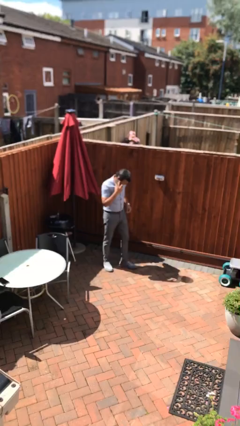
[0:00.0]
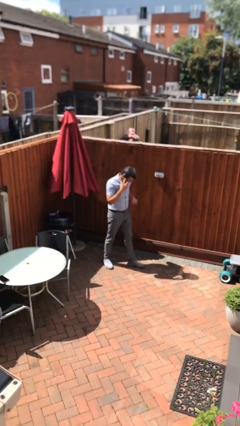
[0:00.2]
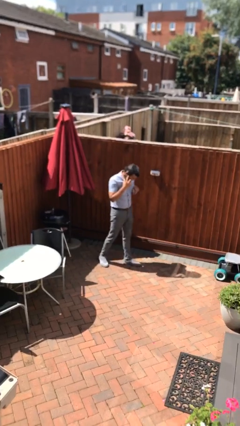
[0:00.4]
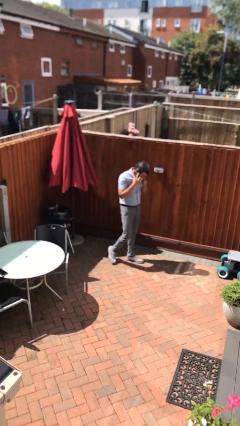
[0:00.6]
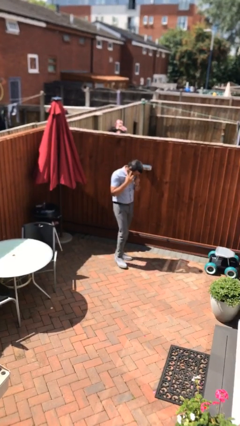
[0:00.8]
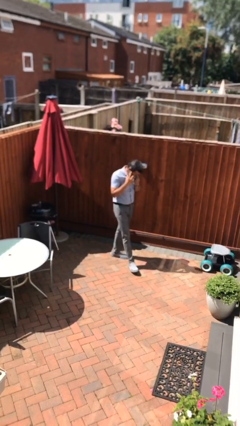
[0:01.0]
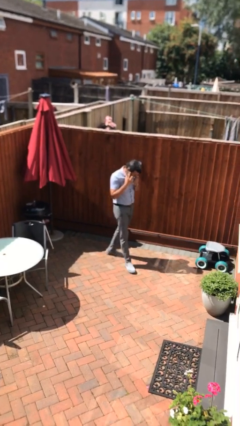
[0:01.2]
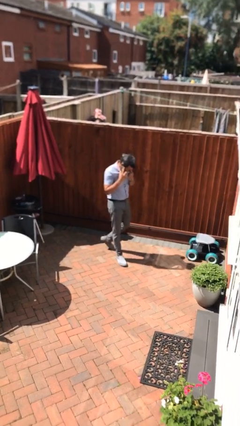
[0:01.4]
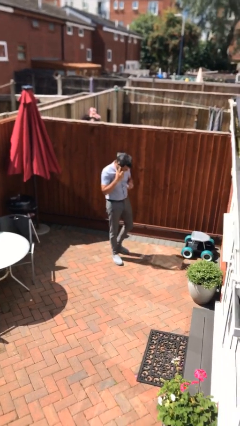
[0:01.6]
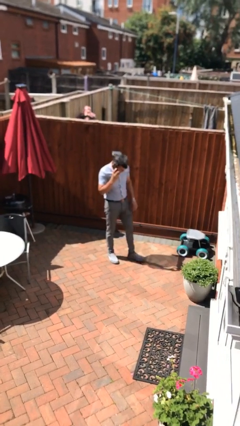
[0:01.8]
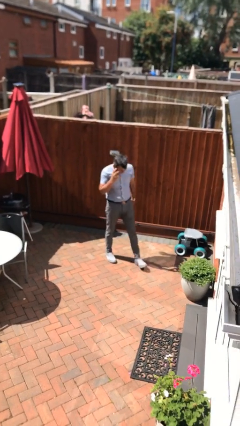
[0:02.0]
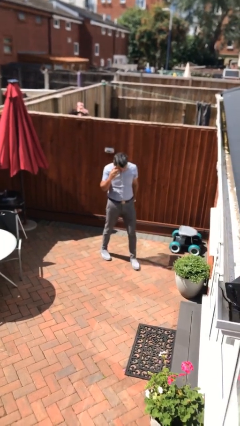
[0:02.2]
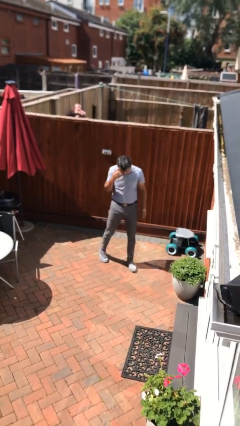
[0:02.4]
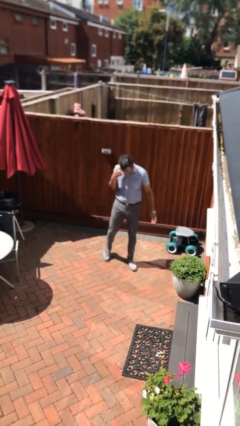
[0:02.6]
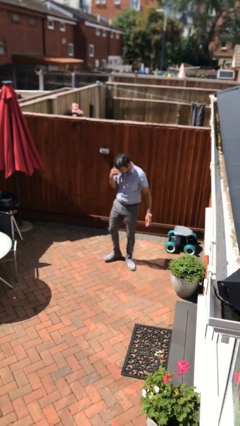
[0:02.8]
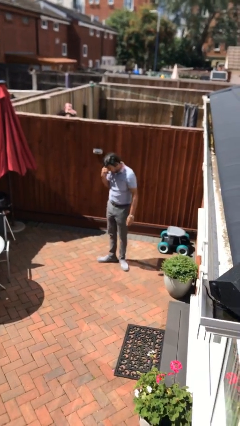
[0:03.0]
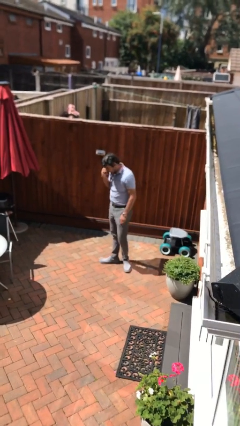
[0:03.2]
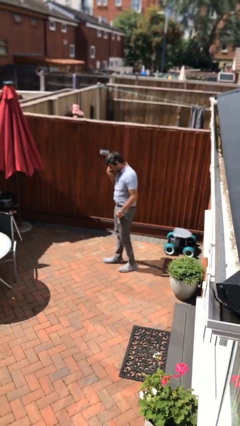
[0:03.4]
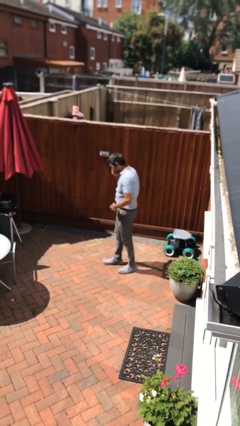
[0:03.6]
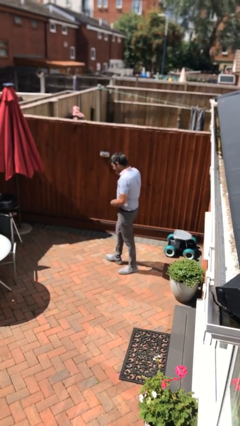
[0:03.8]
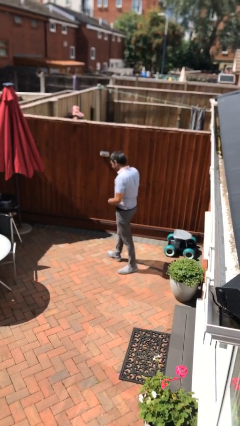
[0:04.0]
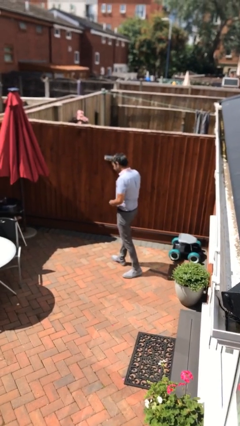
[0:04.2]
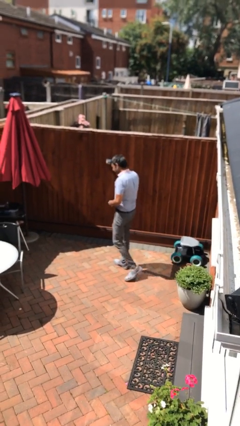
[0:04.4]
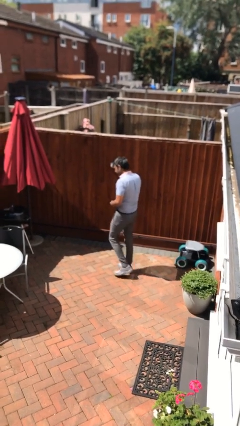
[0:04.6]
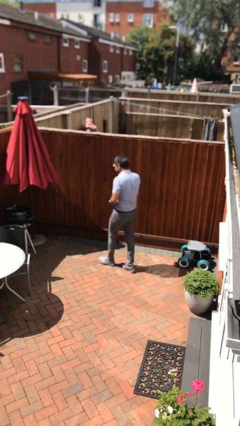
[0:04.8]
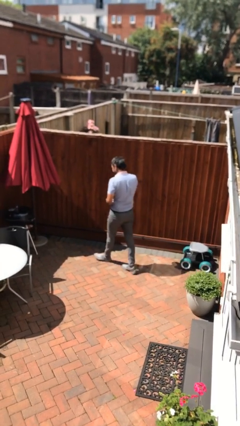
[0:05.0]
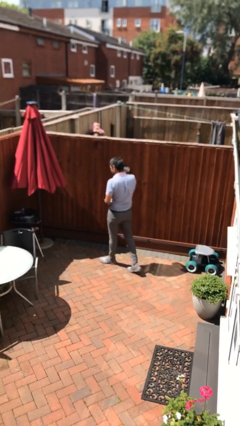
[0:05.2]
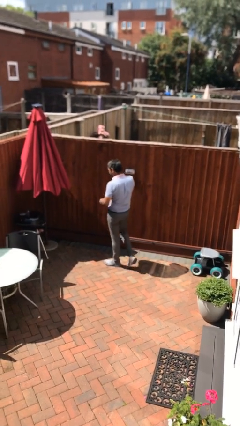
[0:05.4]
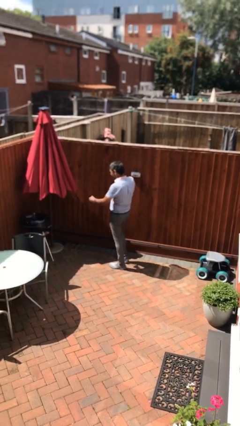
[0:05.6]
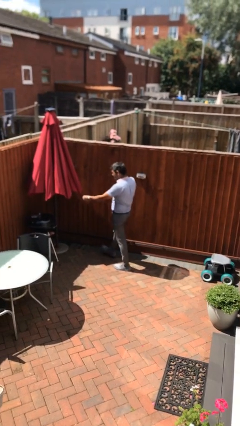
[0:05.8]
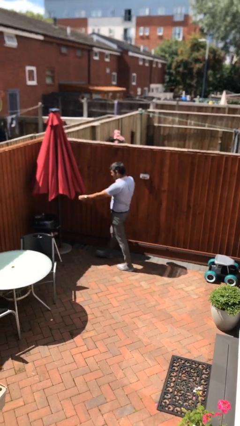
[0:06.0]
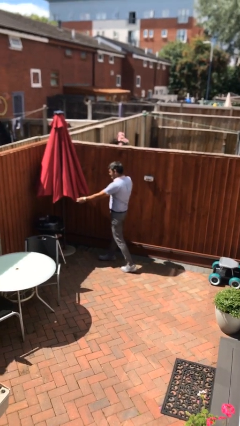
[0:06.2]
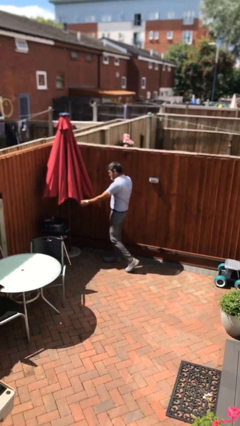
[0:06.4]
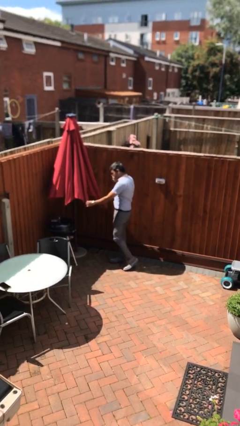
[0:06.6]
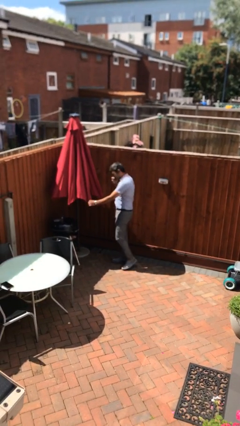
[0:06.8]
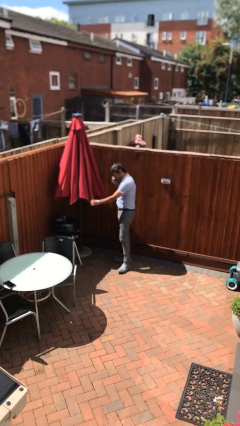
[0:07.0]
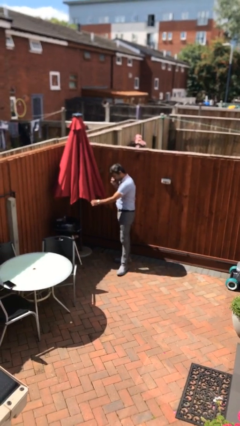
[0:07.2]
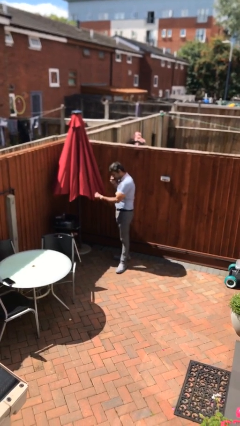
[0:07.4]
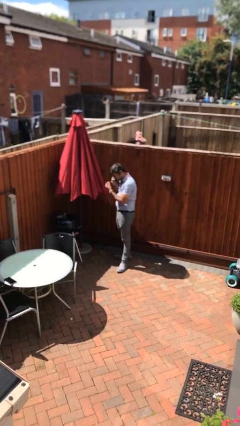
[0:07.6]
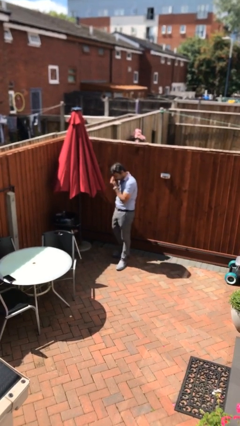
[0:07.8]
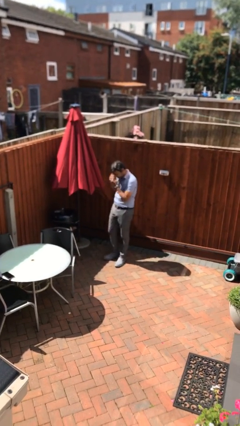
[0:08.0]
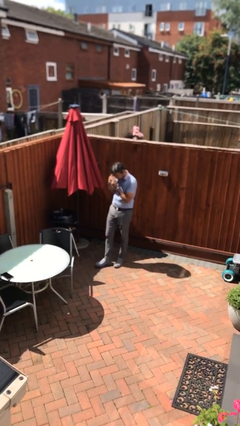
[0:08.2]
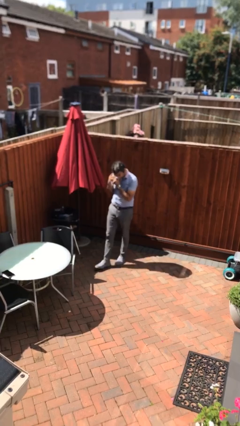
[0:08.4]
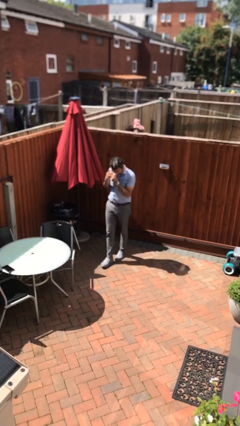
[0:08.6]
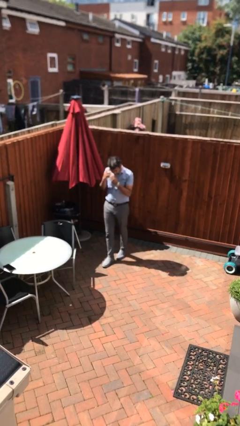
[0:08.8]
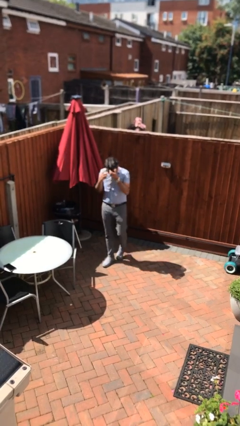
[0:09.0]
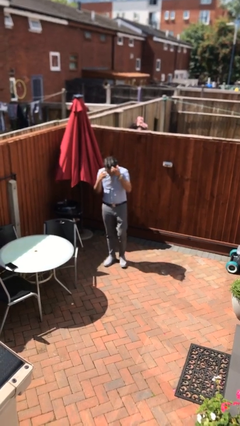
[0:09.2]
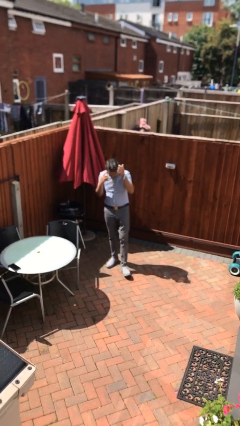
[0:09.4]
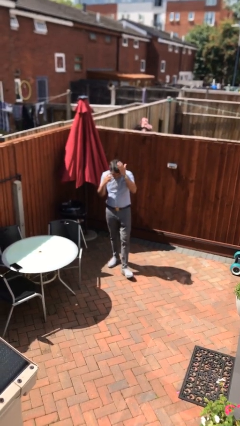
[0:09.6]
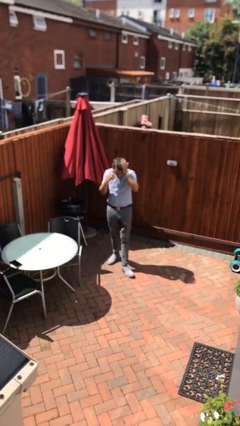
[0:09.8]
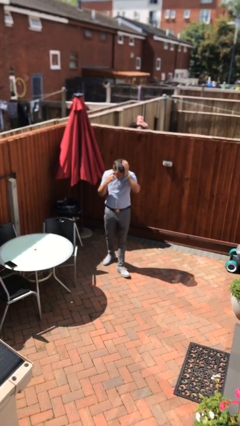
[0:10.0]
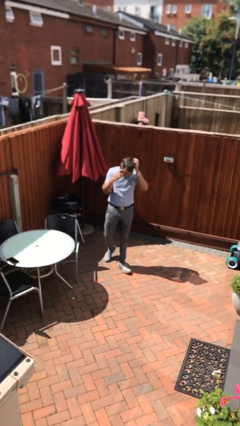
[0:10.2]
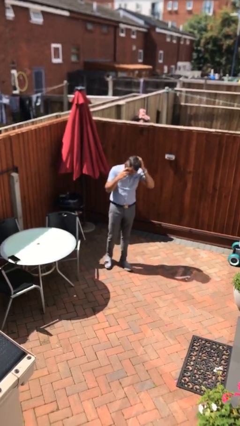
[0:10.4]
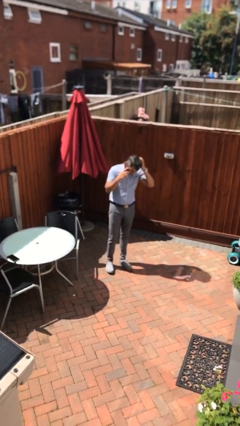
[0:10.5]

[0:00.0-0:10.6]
person talks on phone

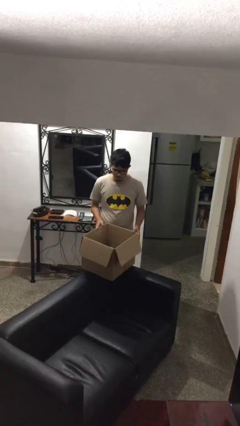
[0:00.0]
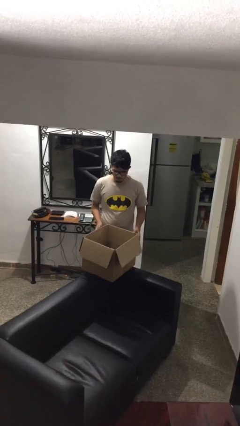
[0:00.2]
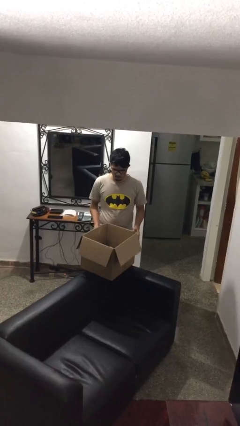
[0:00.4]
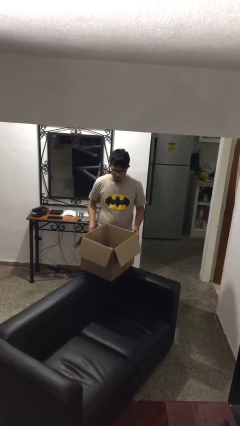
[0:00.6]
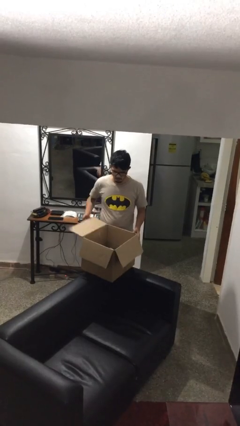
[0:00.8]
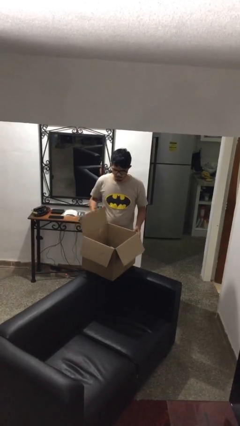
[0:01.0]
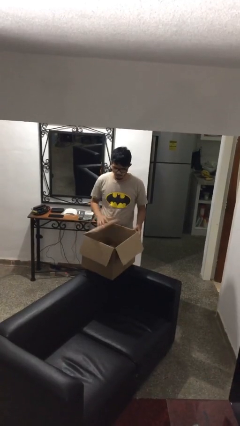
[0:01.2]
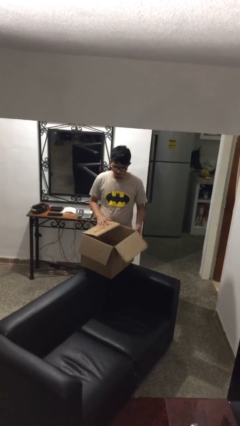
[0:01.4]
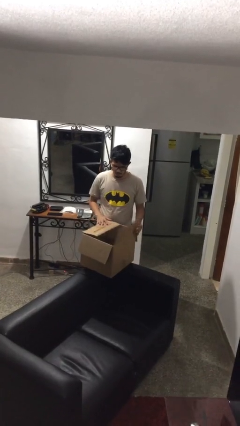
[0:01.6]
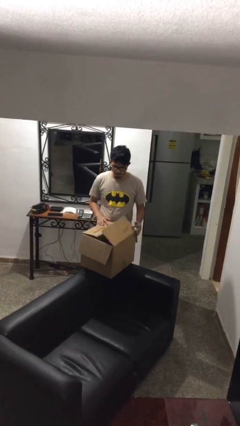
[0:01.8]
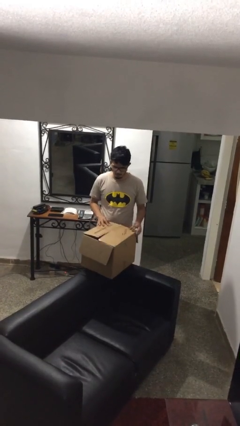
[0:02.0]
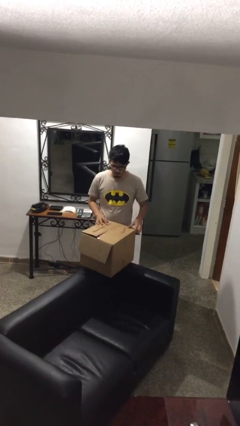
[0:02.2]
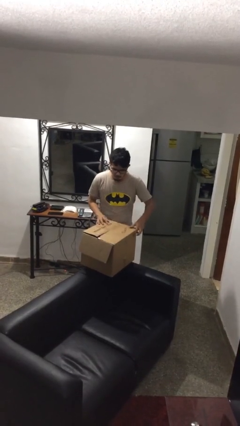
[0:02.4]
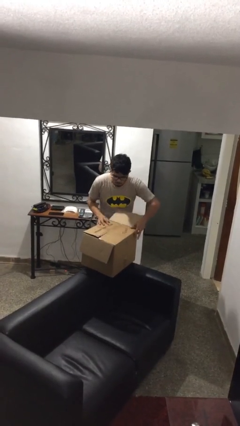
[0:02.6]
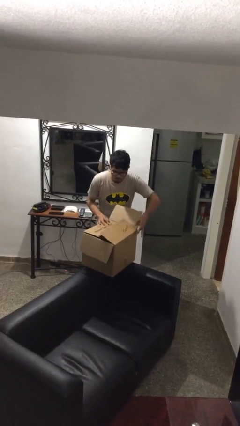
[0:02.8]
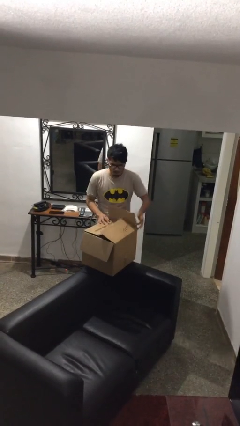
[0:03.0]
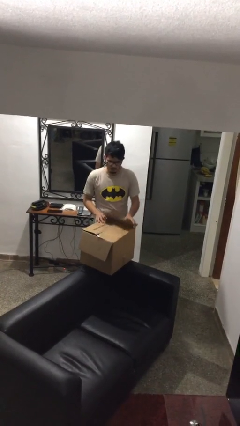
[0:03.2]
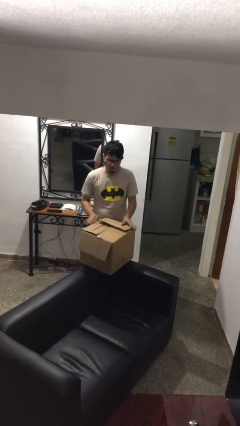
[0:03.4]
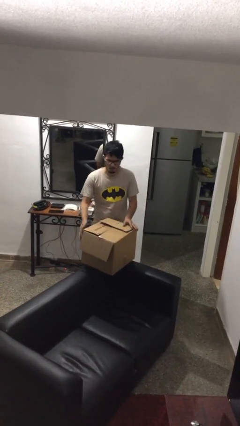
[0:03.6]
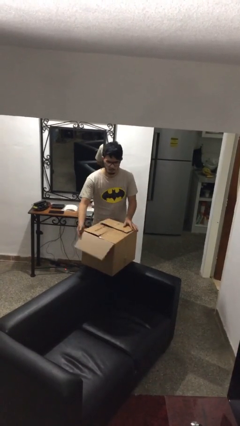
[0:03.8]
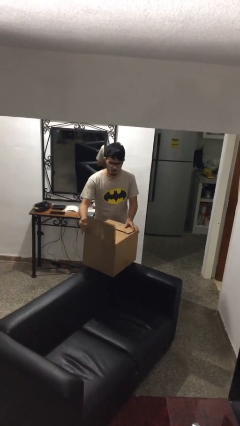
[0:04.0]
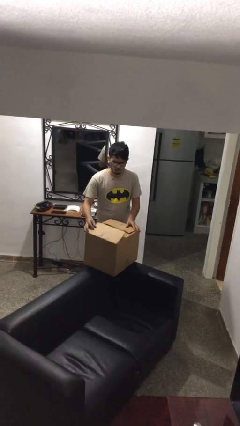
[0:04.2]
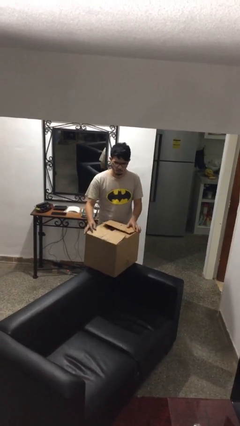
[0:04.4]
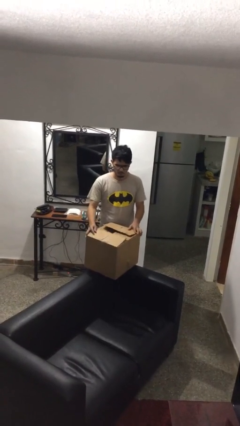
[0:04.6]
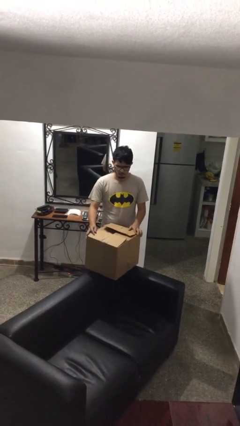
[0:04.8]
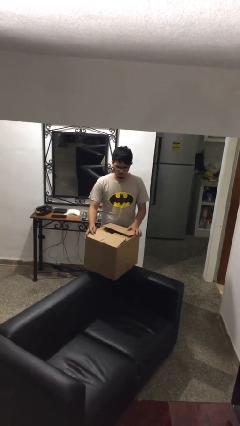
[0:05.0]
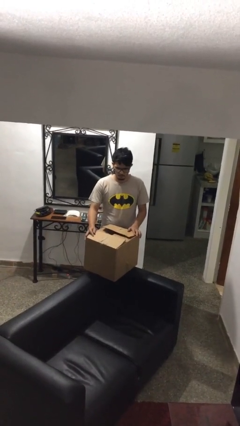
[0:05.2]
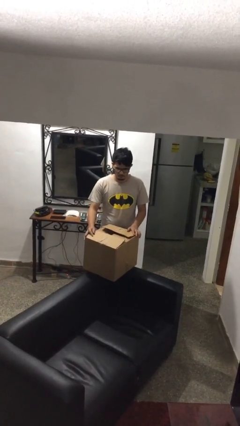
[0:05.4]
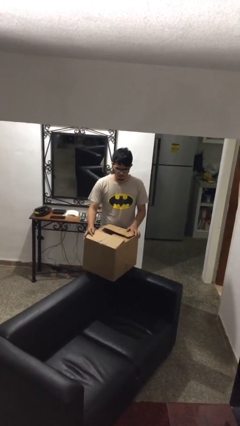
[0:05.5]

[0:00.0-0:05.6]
person closes box

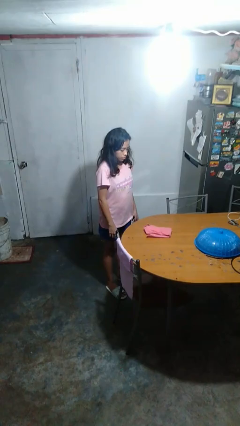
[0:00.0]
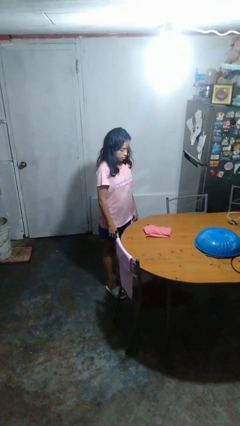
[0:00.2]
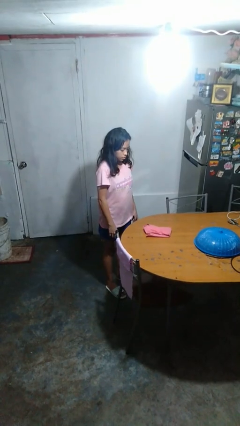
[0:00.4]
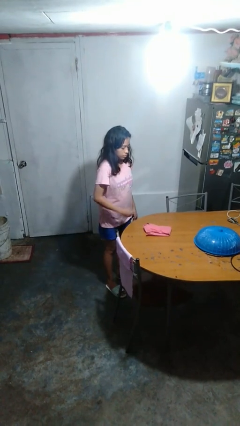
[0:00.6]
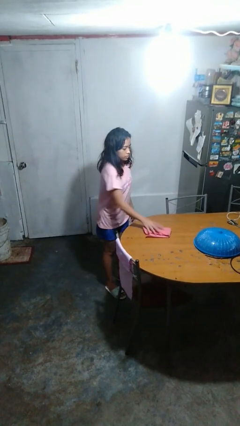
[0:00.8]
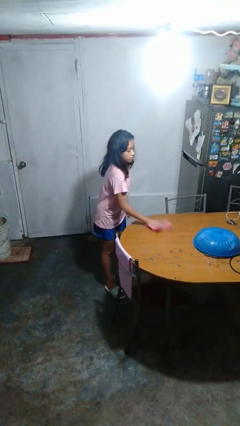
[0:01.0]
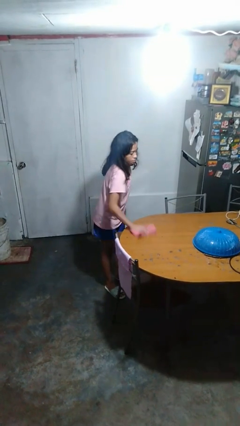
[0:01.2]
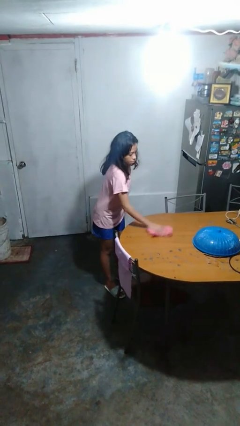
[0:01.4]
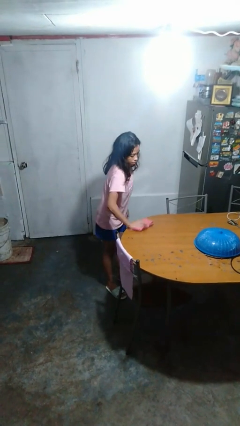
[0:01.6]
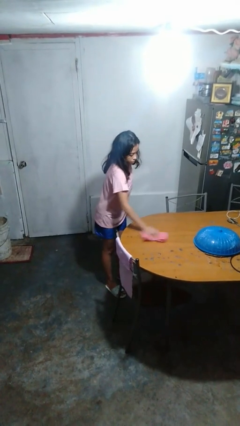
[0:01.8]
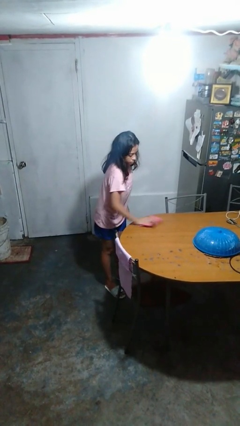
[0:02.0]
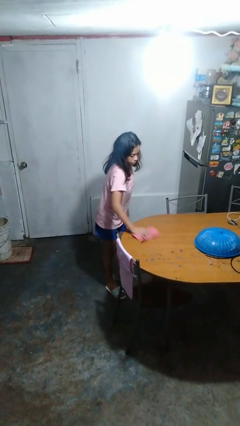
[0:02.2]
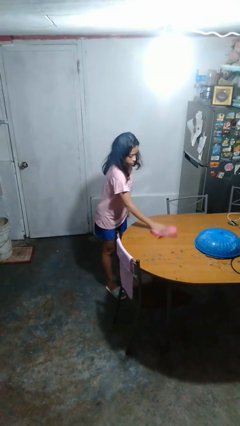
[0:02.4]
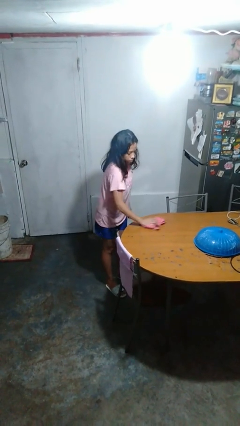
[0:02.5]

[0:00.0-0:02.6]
person cleans table with rag
